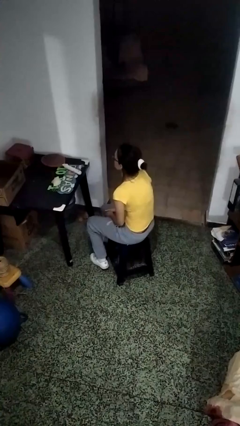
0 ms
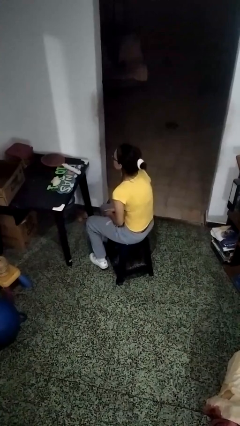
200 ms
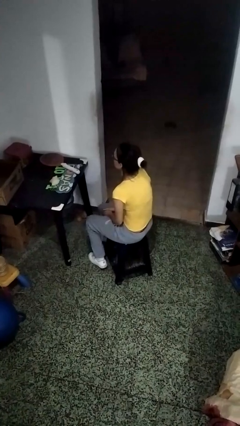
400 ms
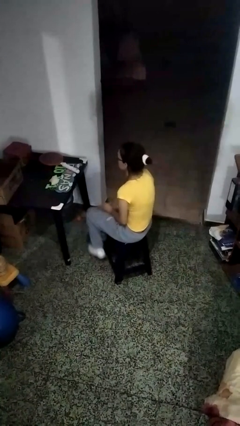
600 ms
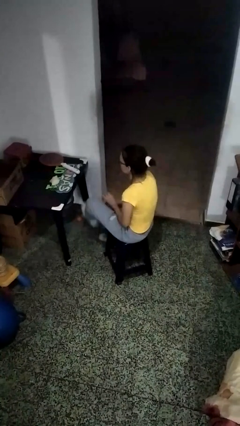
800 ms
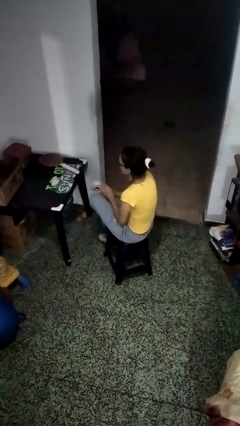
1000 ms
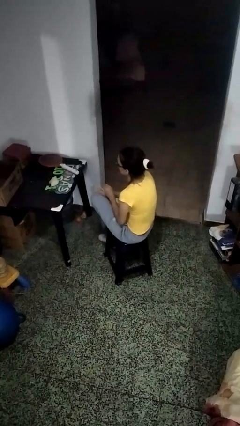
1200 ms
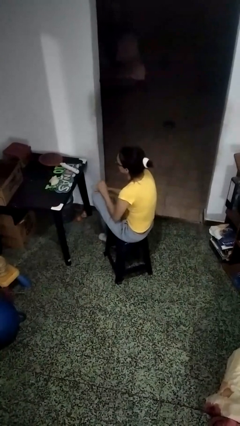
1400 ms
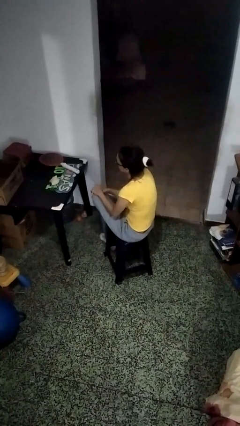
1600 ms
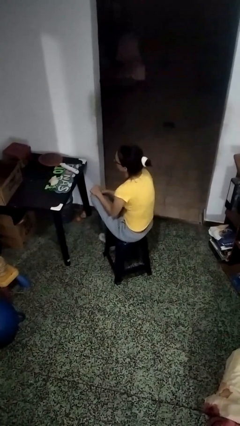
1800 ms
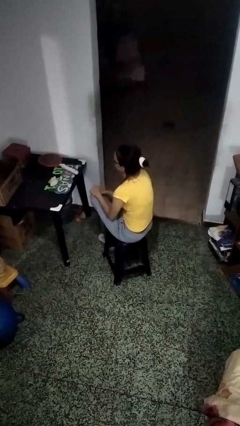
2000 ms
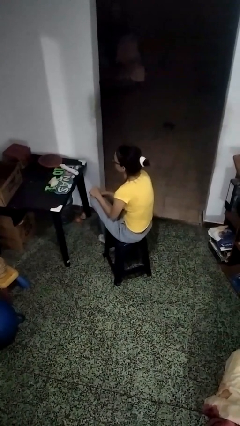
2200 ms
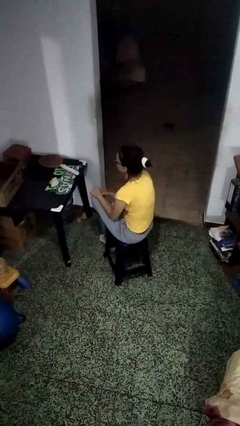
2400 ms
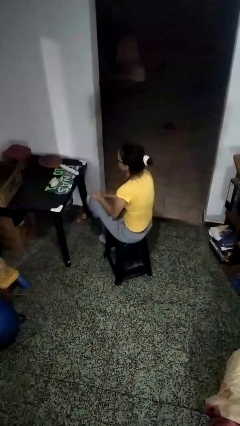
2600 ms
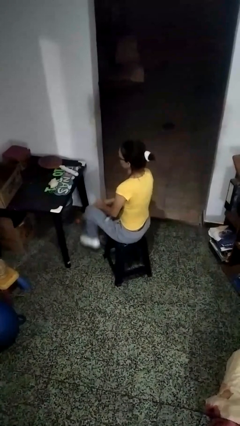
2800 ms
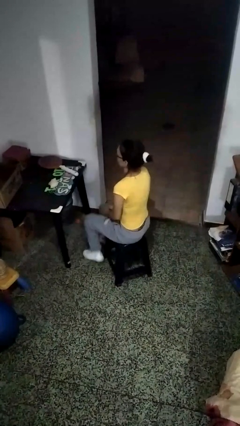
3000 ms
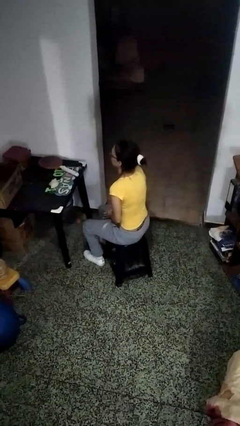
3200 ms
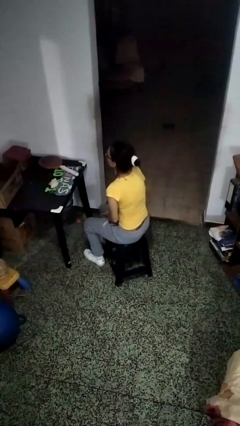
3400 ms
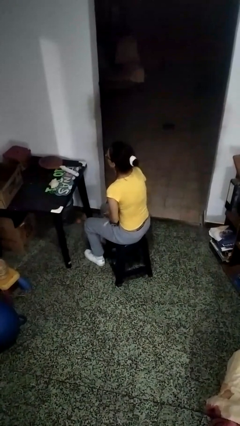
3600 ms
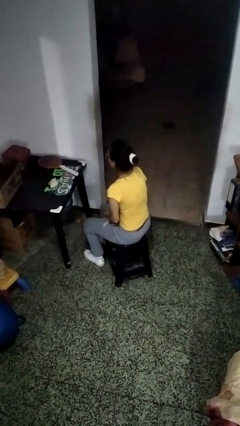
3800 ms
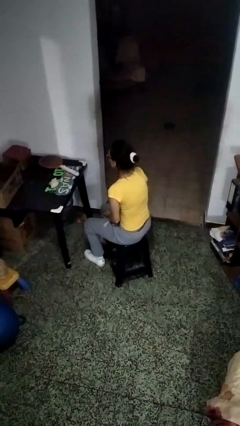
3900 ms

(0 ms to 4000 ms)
person crosses legs

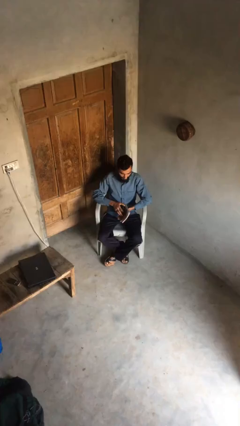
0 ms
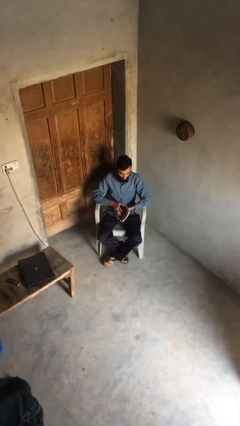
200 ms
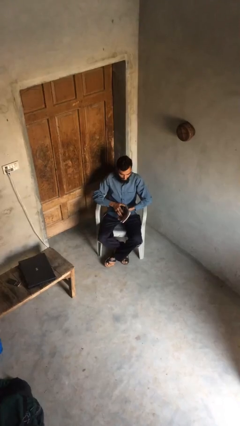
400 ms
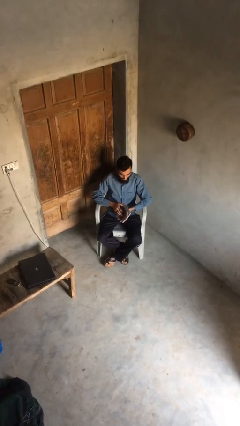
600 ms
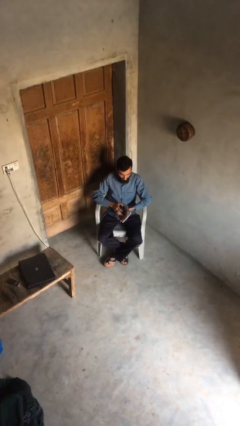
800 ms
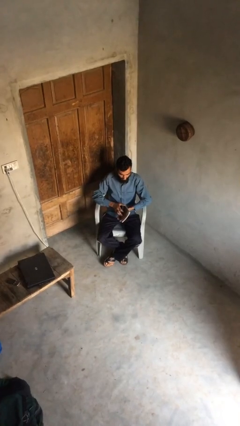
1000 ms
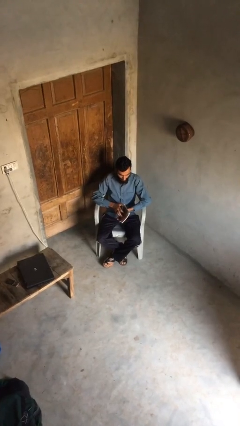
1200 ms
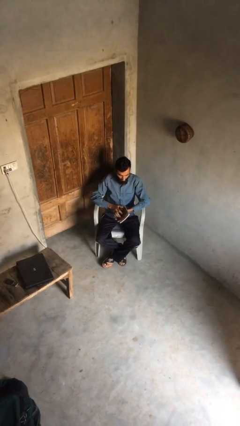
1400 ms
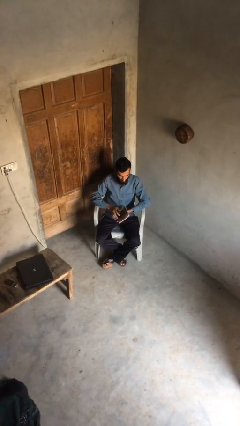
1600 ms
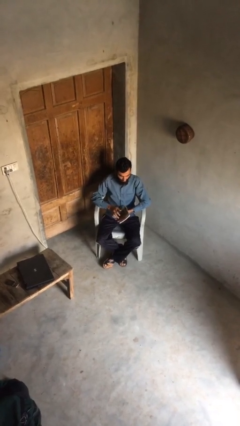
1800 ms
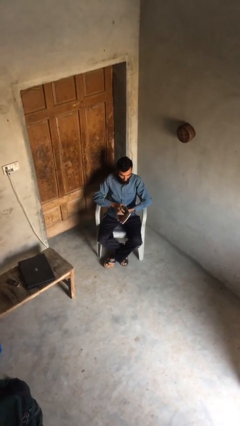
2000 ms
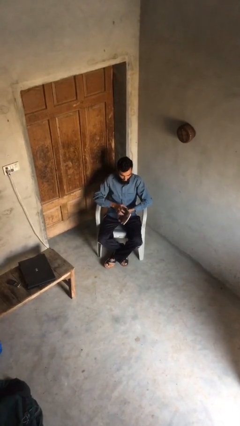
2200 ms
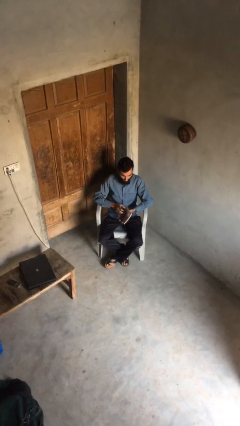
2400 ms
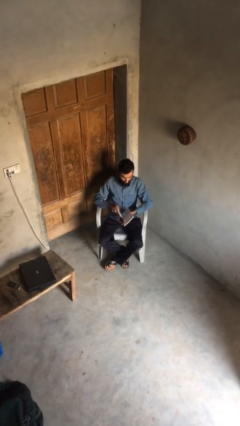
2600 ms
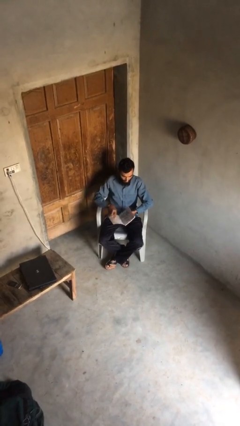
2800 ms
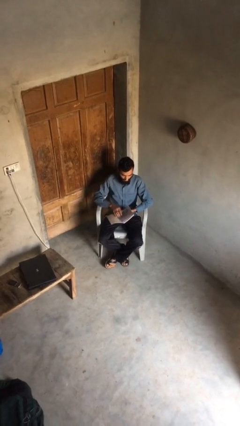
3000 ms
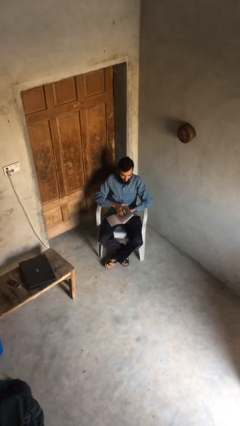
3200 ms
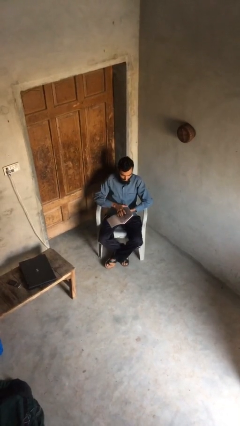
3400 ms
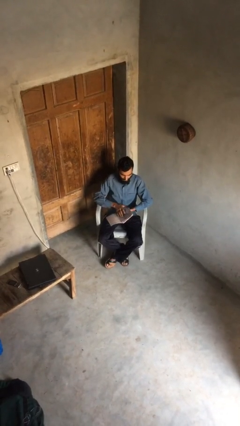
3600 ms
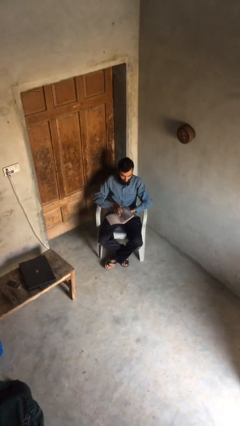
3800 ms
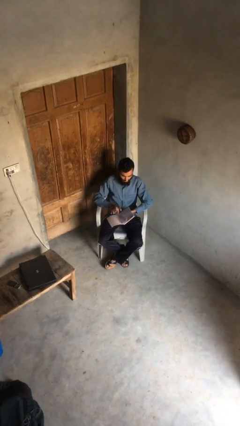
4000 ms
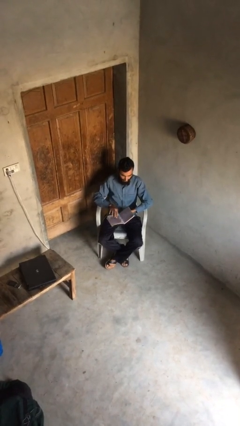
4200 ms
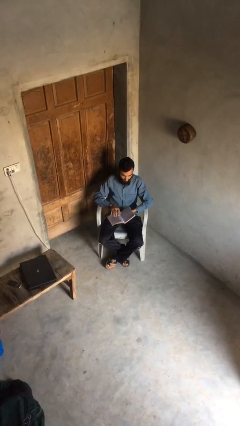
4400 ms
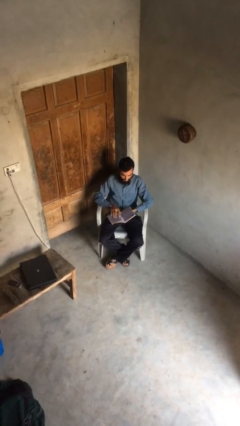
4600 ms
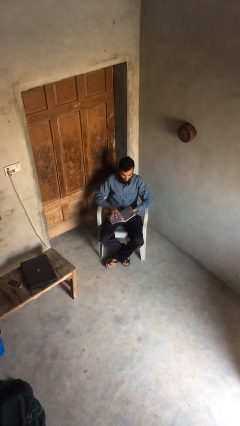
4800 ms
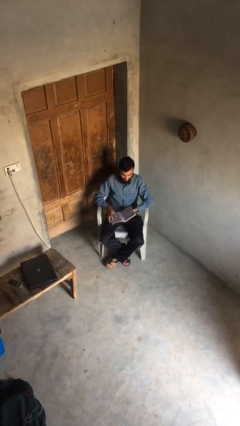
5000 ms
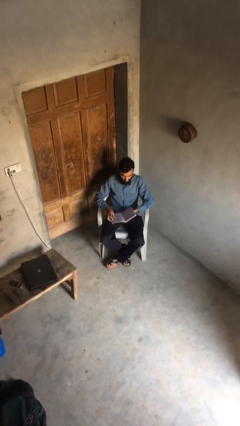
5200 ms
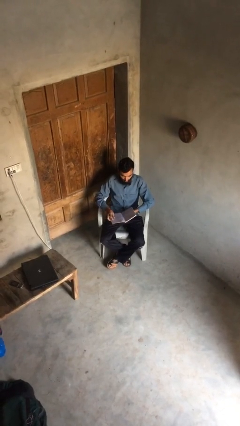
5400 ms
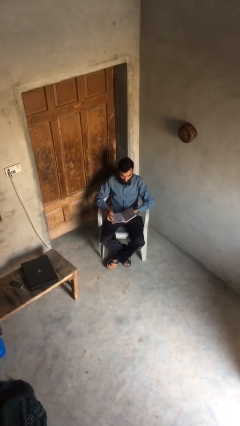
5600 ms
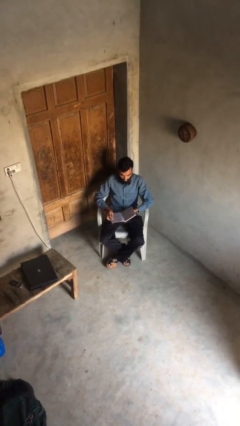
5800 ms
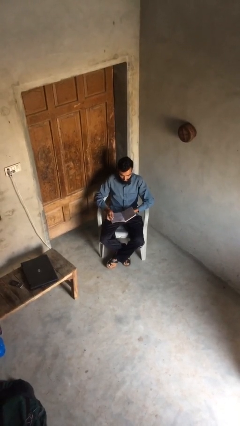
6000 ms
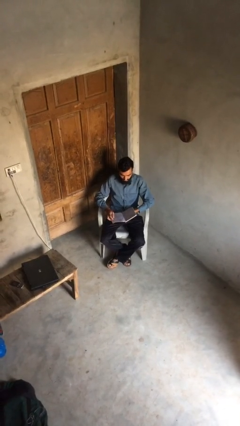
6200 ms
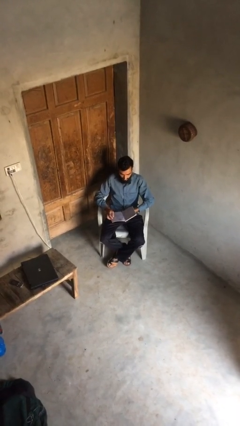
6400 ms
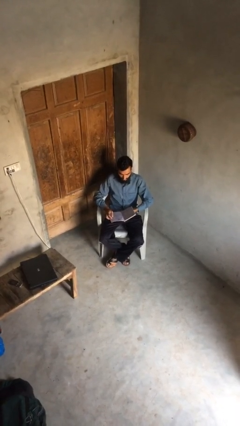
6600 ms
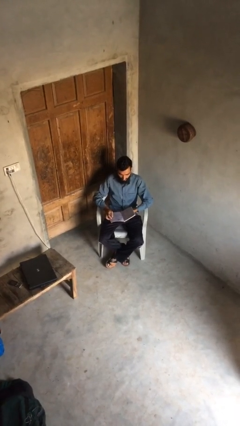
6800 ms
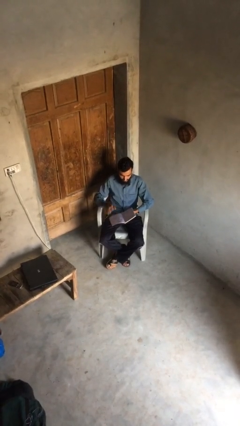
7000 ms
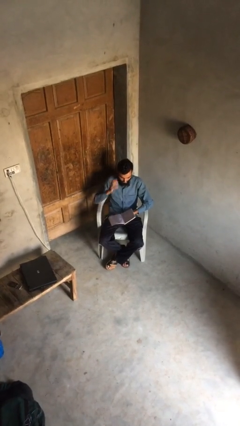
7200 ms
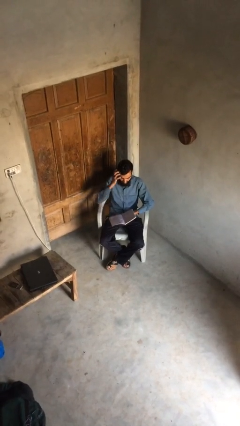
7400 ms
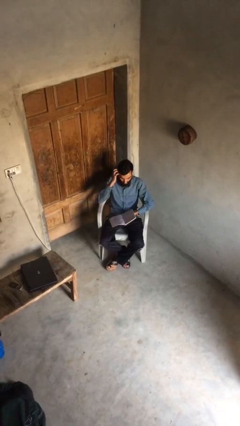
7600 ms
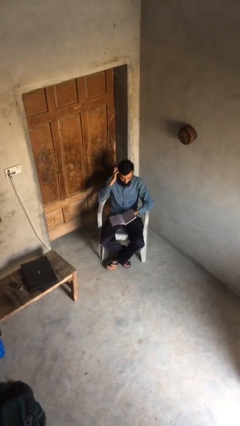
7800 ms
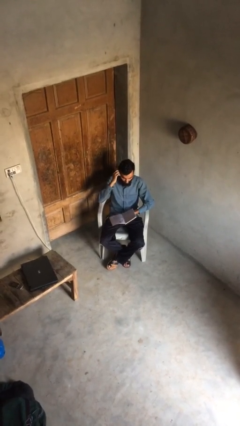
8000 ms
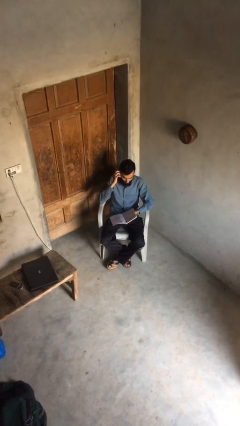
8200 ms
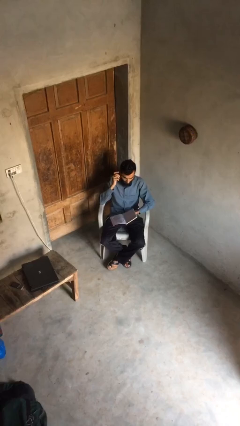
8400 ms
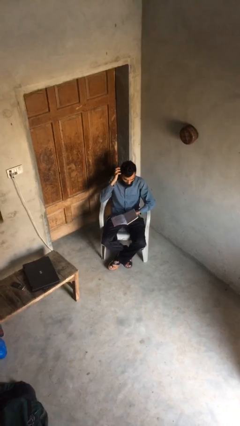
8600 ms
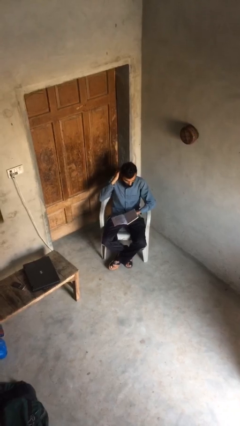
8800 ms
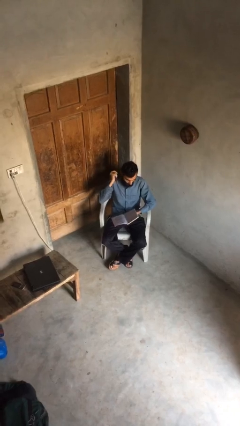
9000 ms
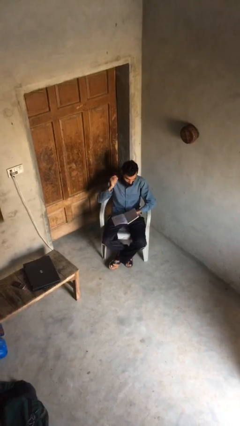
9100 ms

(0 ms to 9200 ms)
person reads document

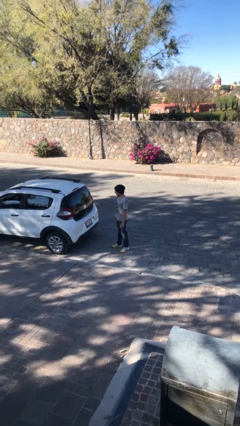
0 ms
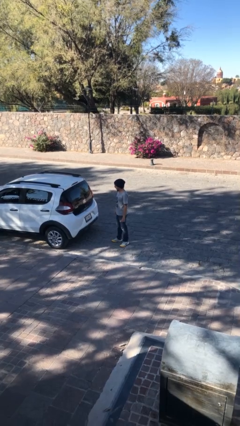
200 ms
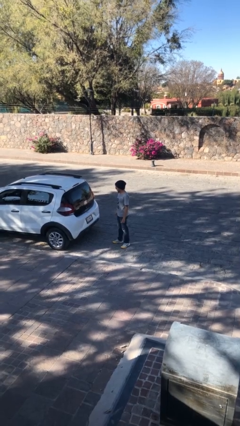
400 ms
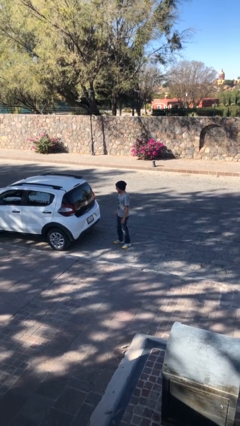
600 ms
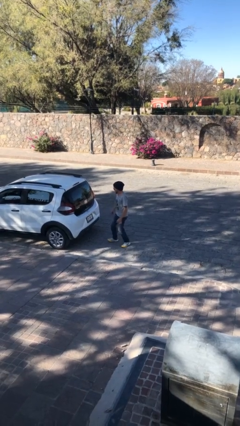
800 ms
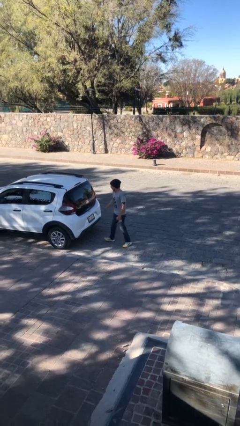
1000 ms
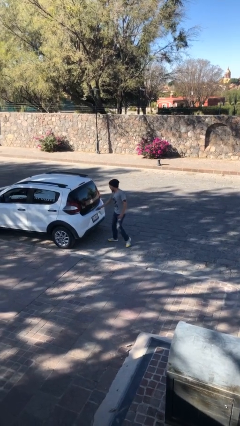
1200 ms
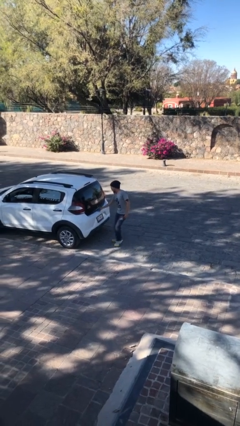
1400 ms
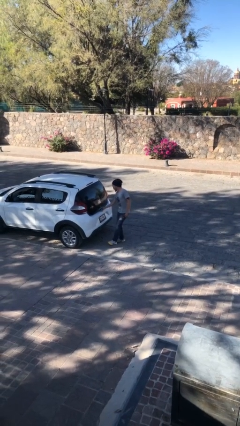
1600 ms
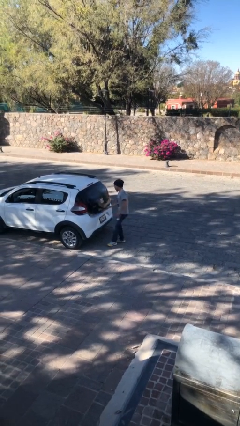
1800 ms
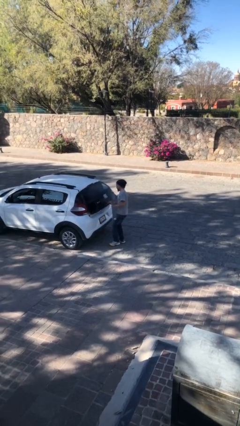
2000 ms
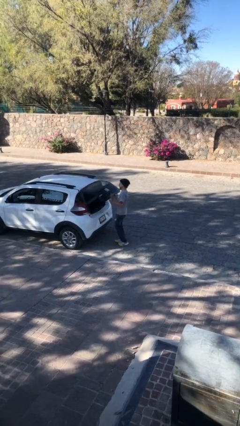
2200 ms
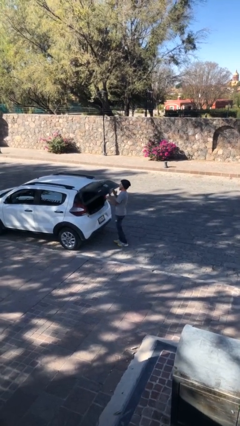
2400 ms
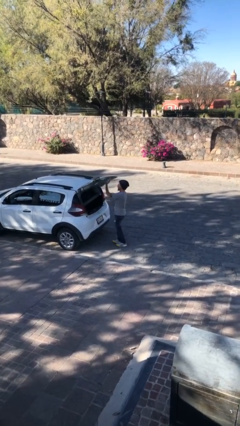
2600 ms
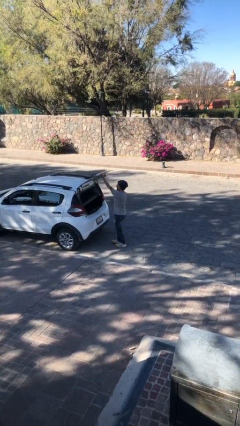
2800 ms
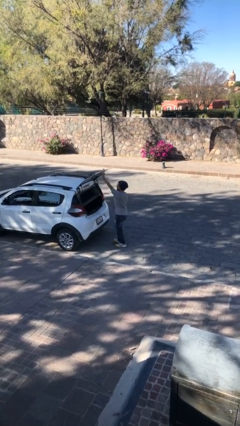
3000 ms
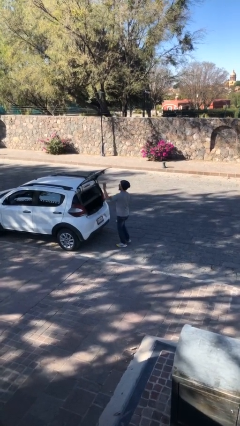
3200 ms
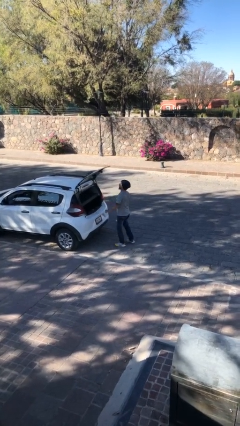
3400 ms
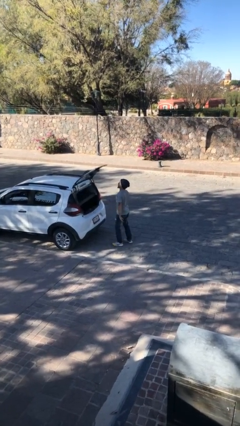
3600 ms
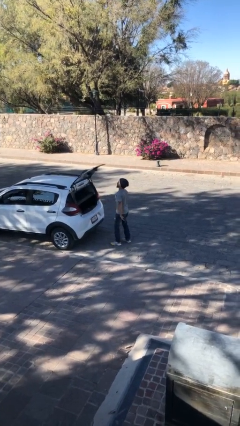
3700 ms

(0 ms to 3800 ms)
person opens car trunk

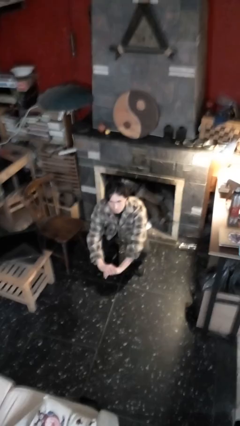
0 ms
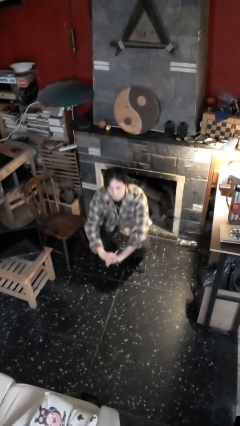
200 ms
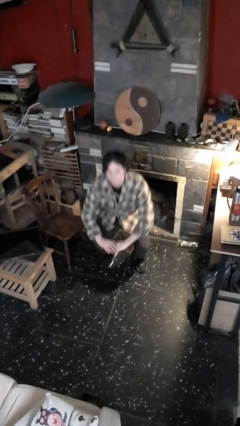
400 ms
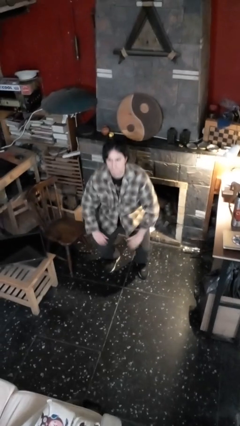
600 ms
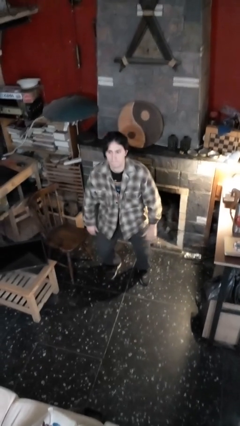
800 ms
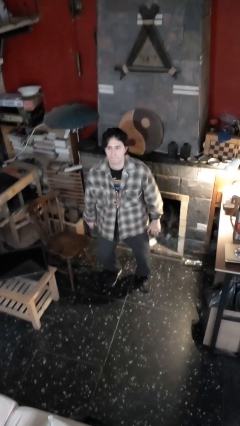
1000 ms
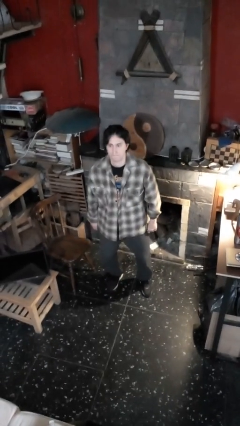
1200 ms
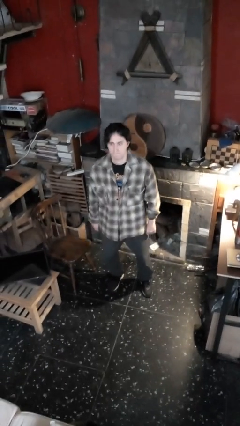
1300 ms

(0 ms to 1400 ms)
person stands up
